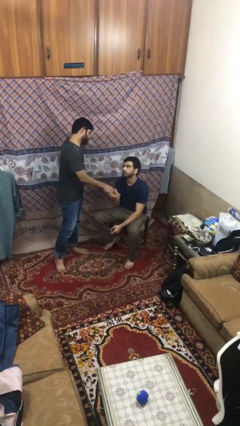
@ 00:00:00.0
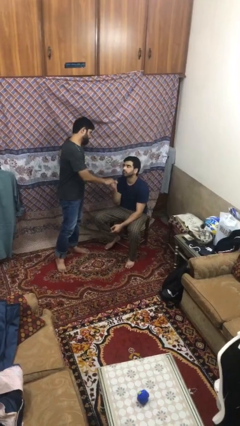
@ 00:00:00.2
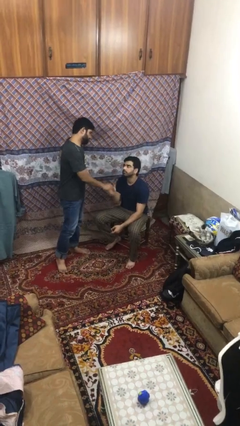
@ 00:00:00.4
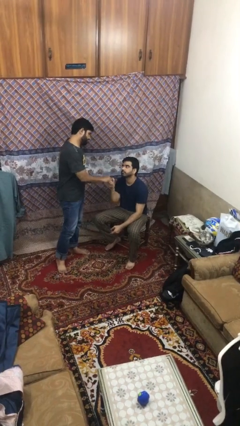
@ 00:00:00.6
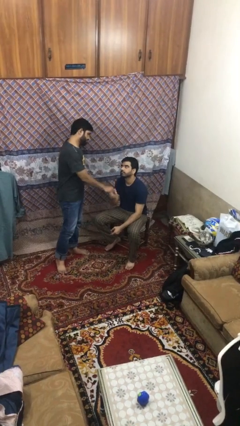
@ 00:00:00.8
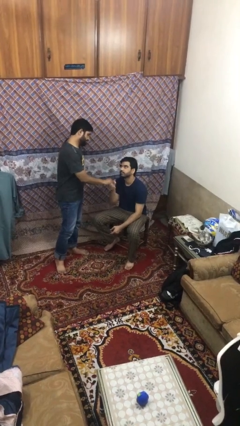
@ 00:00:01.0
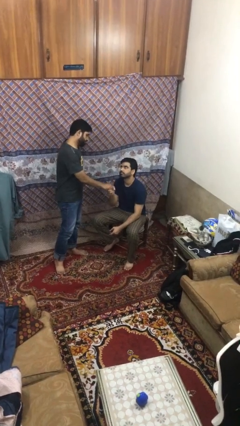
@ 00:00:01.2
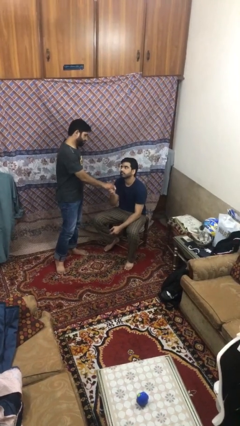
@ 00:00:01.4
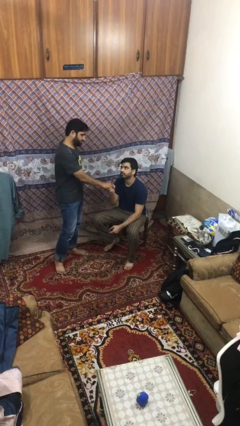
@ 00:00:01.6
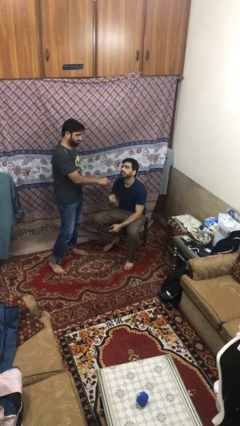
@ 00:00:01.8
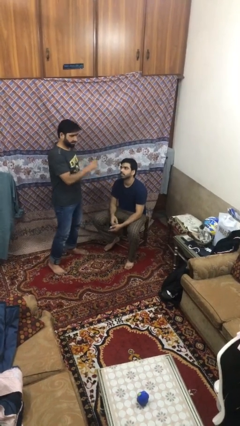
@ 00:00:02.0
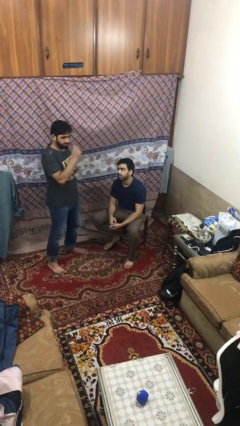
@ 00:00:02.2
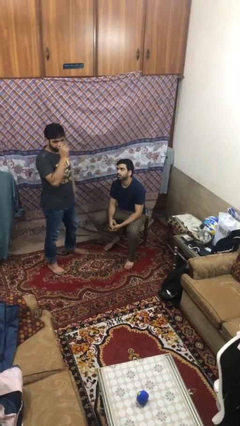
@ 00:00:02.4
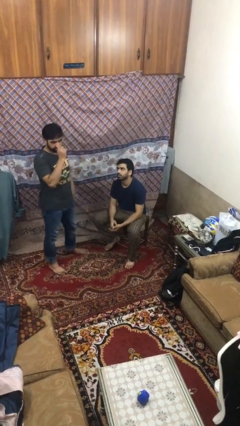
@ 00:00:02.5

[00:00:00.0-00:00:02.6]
person shakes hand

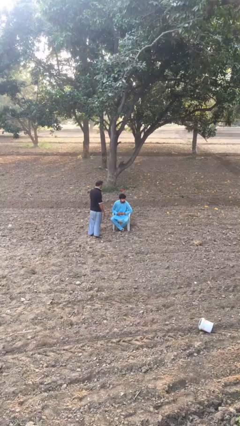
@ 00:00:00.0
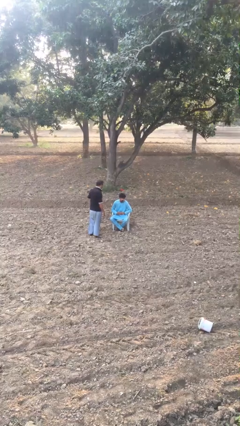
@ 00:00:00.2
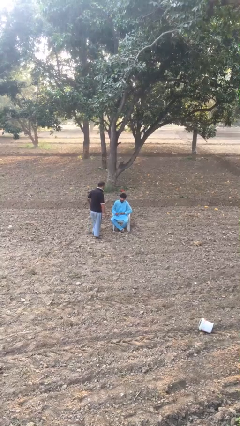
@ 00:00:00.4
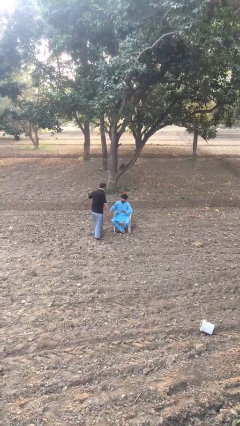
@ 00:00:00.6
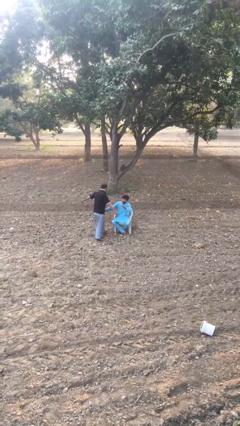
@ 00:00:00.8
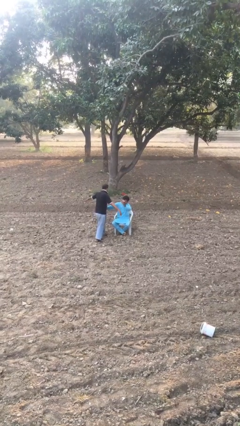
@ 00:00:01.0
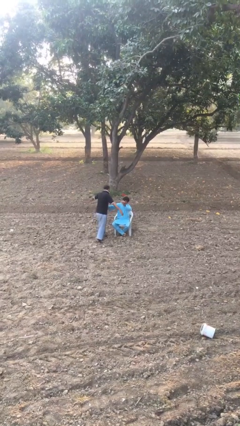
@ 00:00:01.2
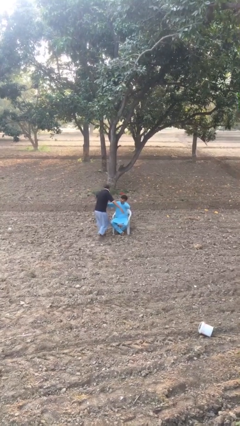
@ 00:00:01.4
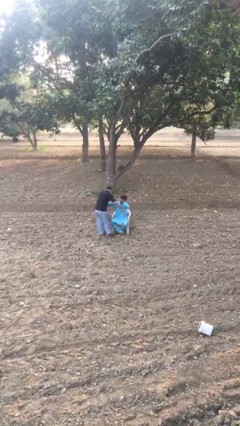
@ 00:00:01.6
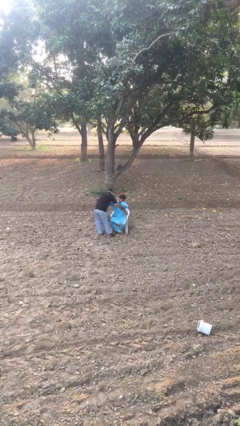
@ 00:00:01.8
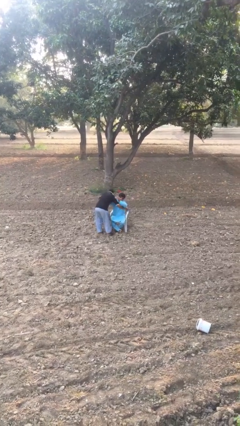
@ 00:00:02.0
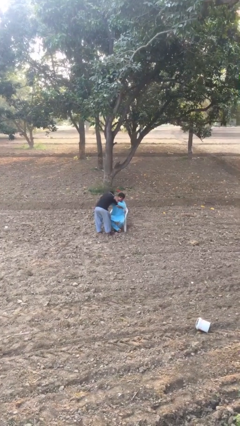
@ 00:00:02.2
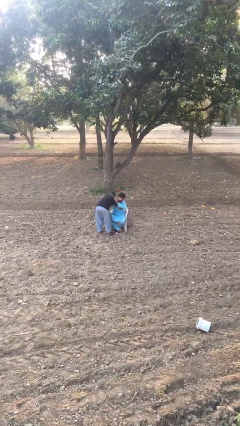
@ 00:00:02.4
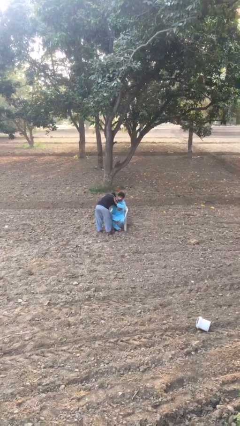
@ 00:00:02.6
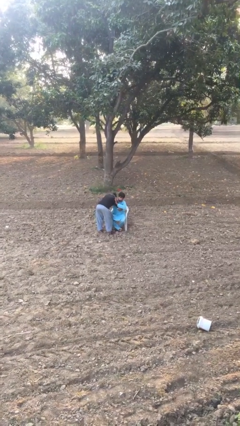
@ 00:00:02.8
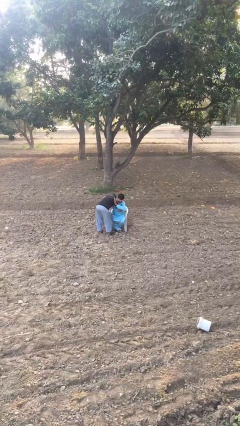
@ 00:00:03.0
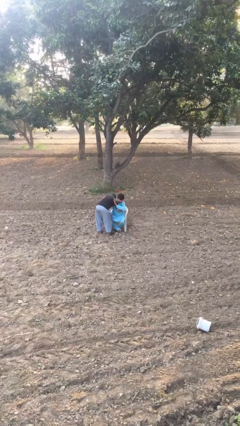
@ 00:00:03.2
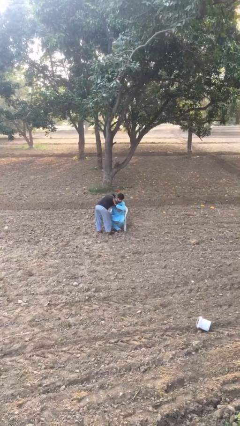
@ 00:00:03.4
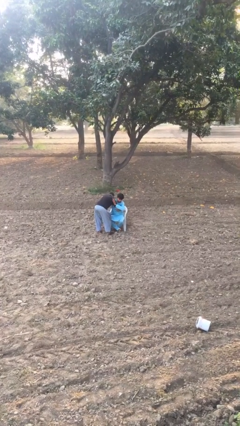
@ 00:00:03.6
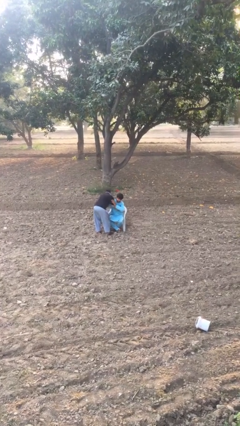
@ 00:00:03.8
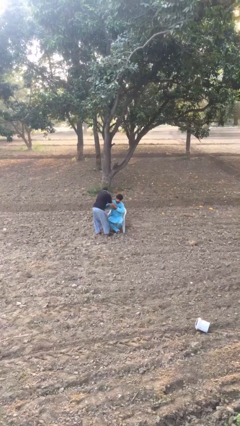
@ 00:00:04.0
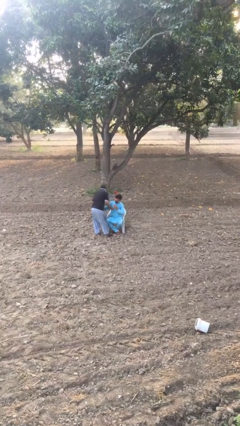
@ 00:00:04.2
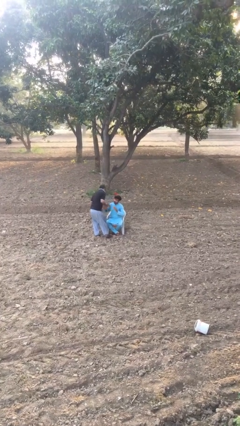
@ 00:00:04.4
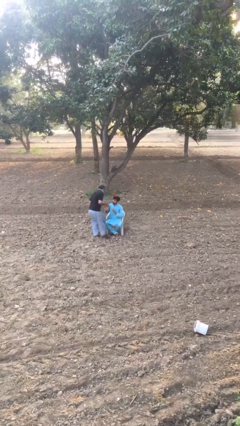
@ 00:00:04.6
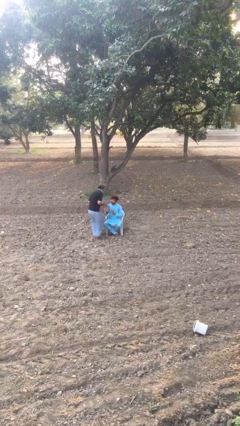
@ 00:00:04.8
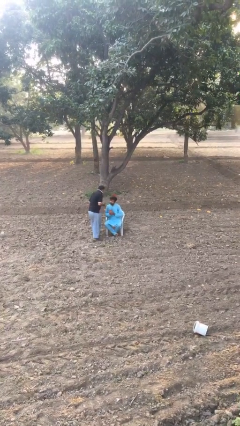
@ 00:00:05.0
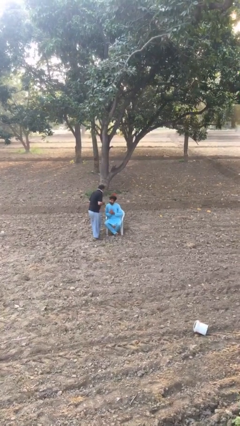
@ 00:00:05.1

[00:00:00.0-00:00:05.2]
person embraces person

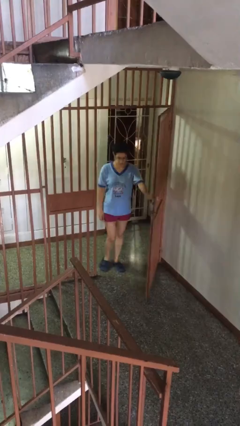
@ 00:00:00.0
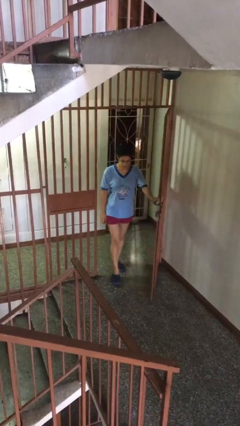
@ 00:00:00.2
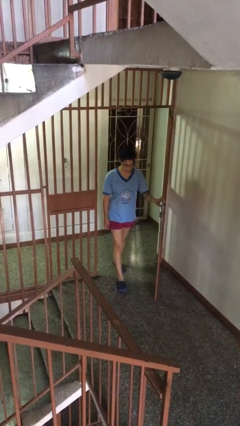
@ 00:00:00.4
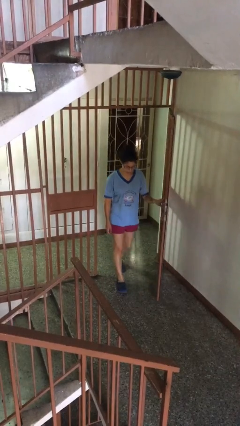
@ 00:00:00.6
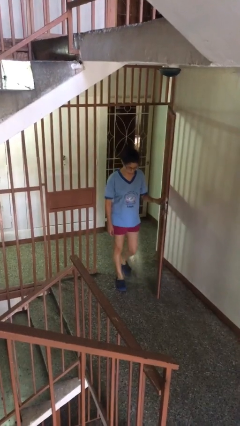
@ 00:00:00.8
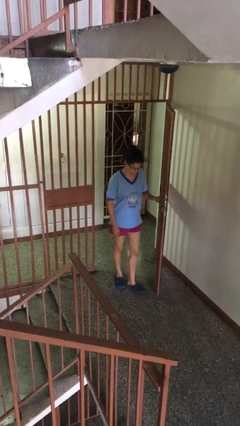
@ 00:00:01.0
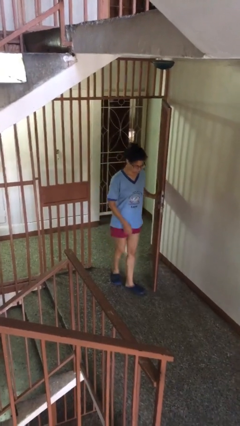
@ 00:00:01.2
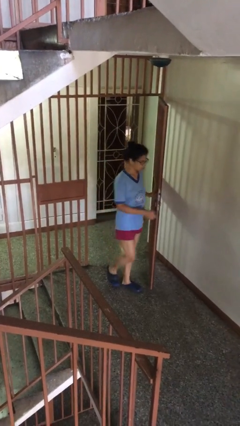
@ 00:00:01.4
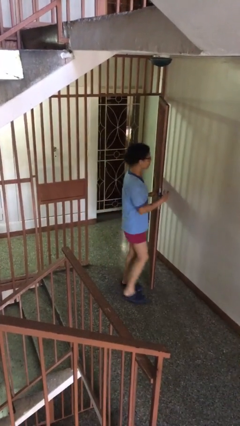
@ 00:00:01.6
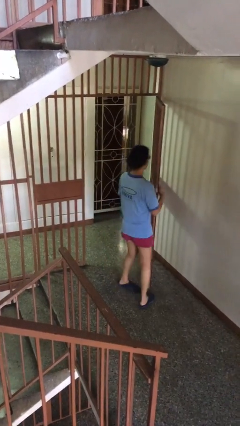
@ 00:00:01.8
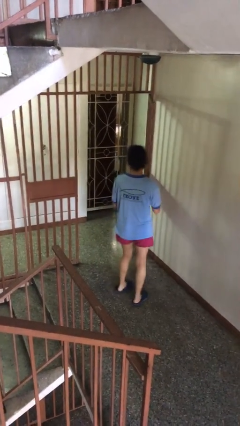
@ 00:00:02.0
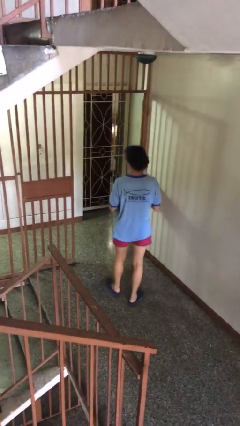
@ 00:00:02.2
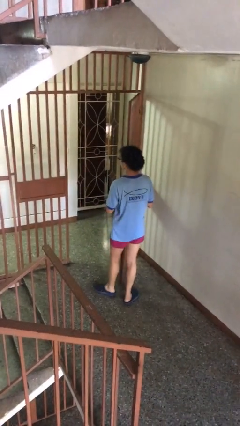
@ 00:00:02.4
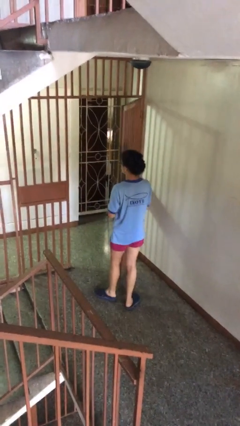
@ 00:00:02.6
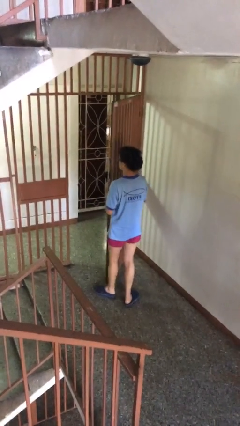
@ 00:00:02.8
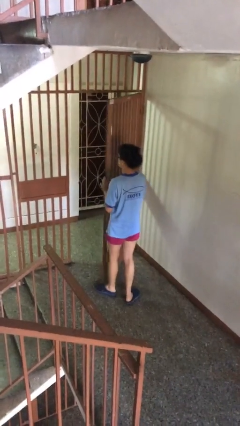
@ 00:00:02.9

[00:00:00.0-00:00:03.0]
person enters scene through structure

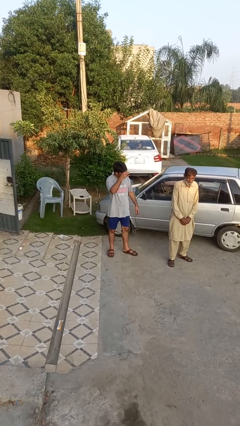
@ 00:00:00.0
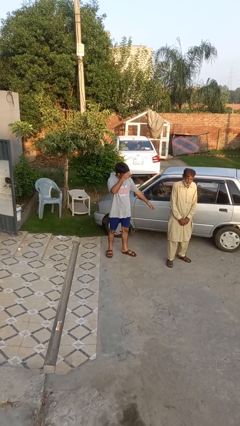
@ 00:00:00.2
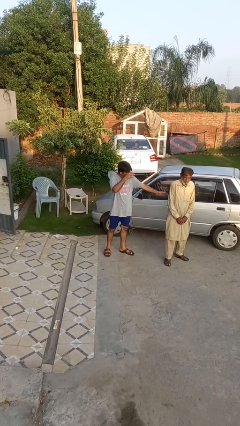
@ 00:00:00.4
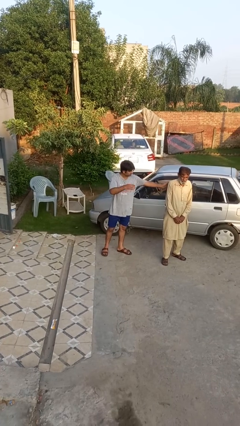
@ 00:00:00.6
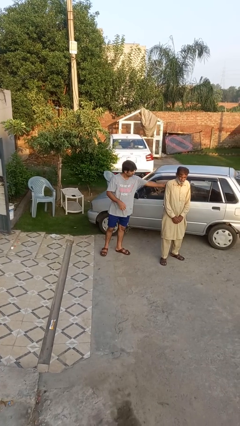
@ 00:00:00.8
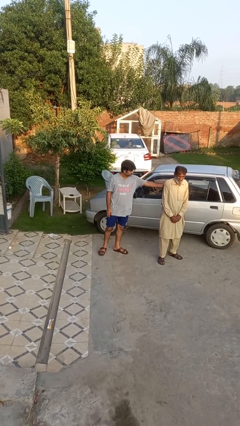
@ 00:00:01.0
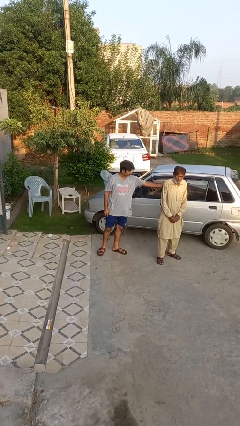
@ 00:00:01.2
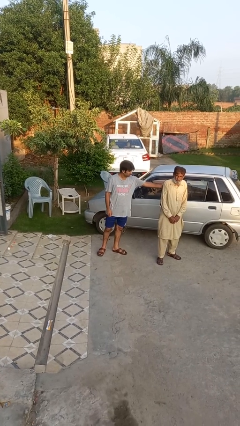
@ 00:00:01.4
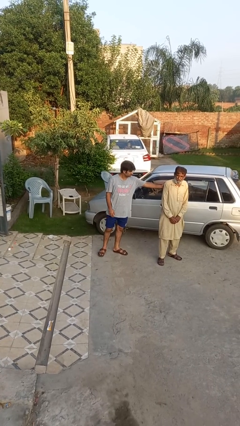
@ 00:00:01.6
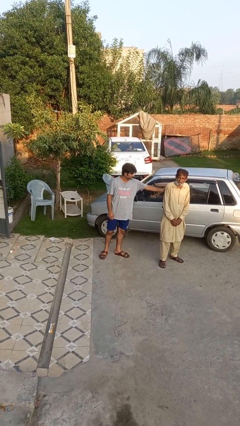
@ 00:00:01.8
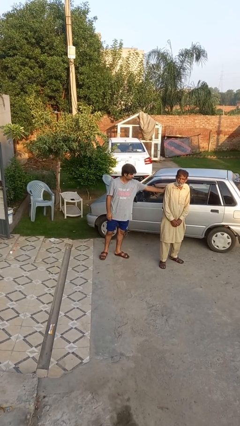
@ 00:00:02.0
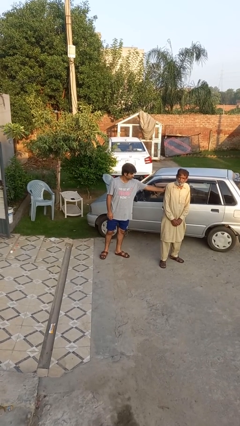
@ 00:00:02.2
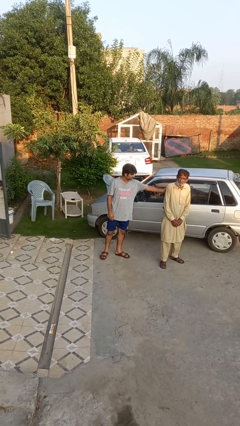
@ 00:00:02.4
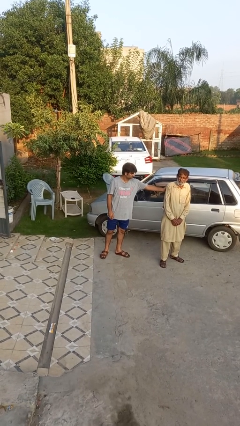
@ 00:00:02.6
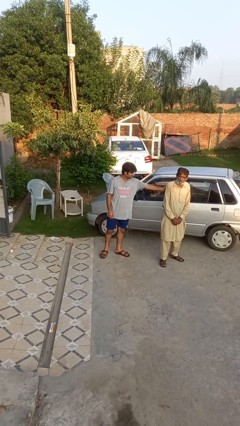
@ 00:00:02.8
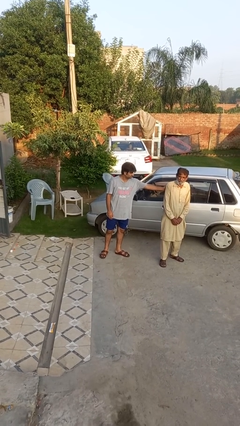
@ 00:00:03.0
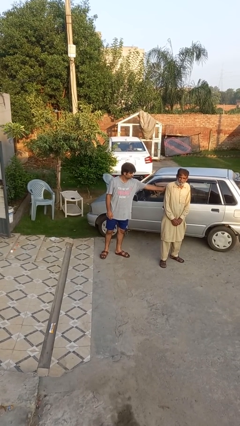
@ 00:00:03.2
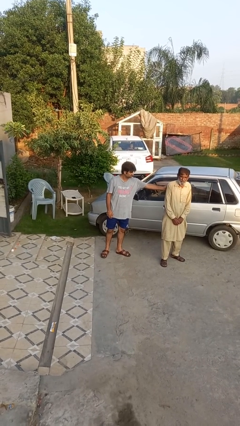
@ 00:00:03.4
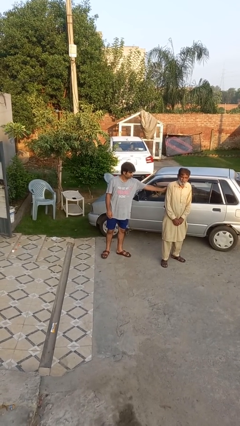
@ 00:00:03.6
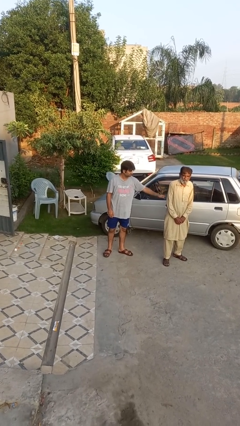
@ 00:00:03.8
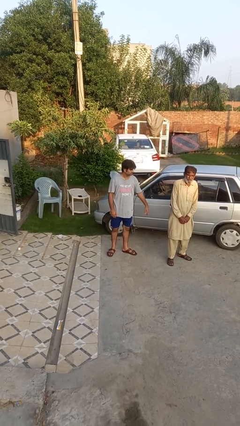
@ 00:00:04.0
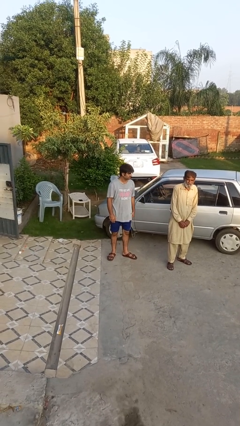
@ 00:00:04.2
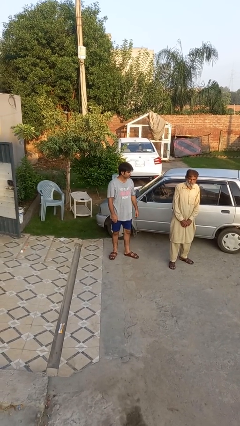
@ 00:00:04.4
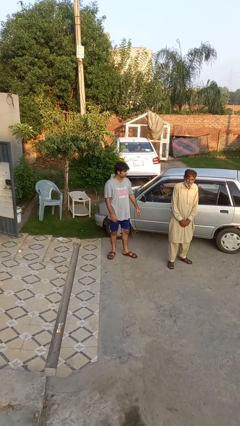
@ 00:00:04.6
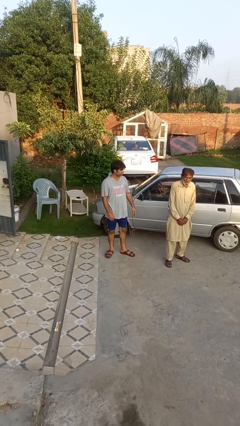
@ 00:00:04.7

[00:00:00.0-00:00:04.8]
person touches back of person

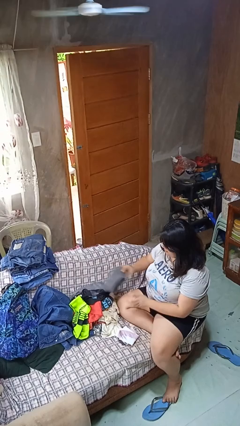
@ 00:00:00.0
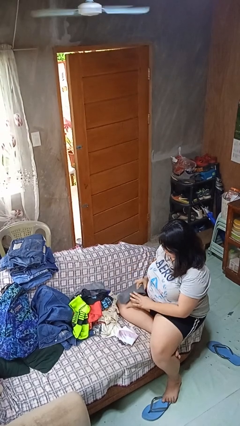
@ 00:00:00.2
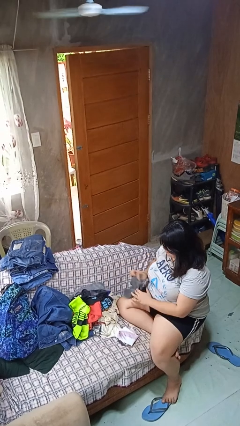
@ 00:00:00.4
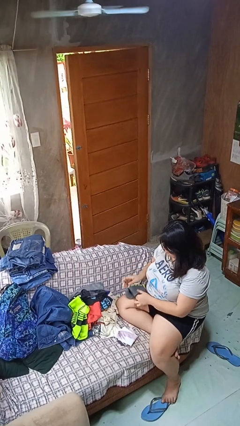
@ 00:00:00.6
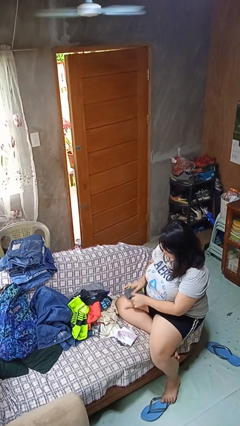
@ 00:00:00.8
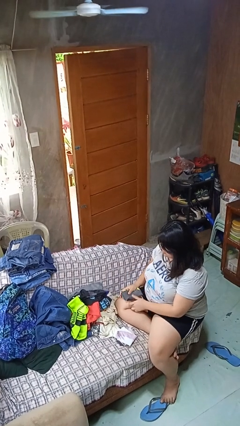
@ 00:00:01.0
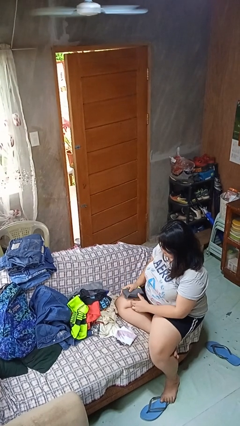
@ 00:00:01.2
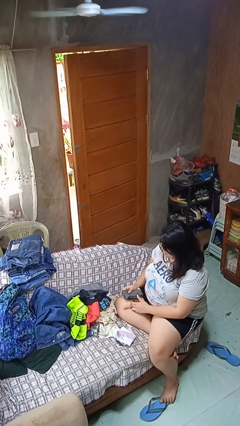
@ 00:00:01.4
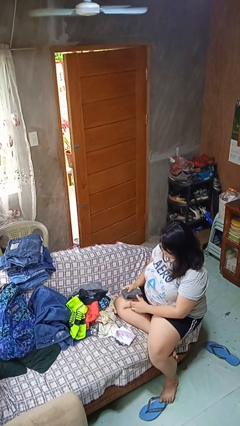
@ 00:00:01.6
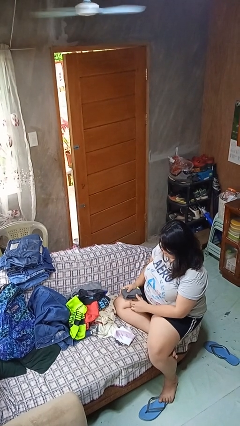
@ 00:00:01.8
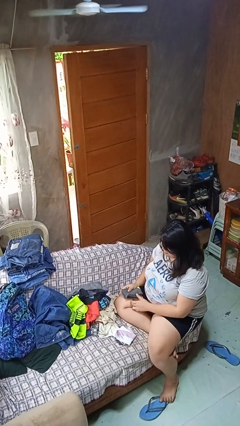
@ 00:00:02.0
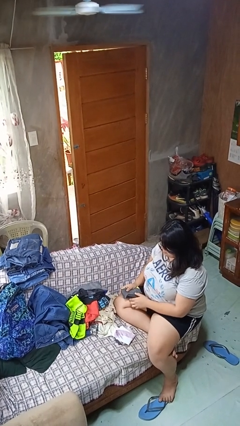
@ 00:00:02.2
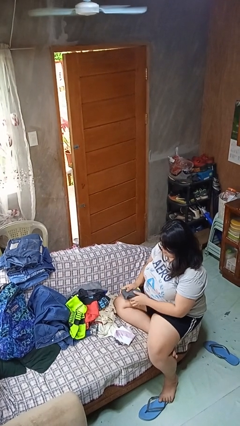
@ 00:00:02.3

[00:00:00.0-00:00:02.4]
person folds socks
